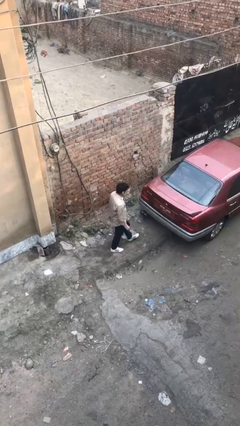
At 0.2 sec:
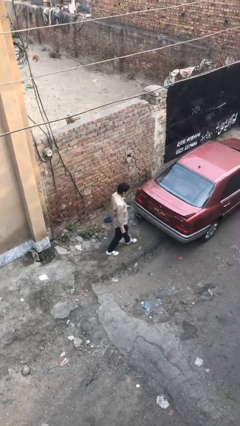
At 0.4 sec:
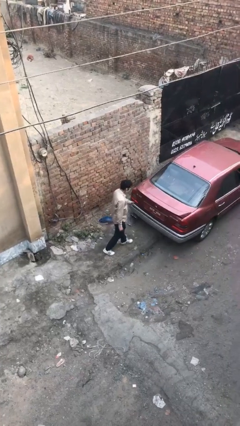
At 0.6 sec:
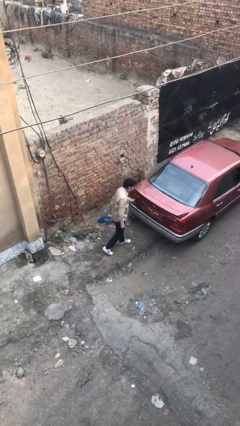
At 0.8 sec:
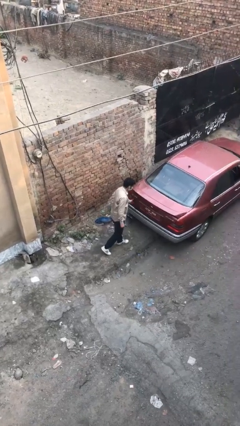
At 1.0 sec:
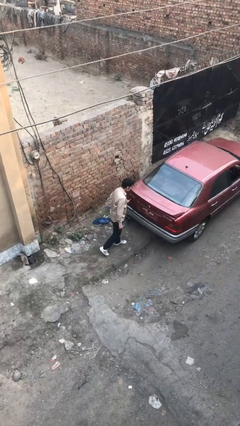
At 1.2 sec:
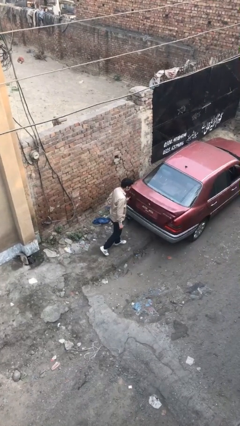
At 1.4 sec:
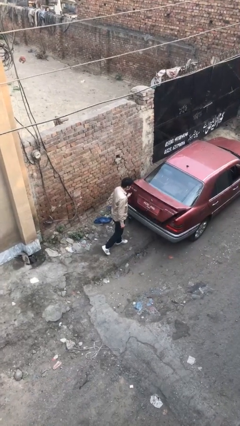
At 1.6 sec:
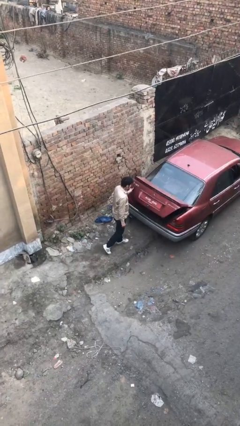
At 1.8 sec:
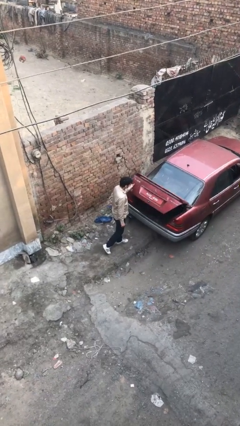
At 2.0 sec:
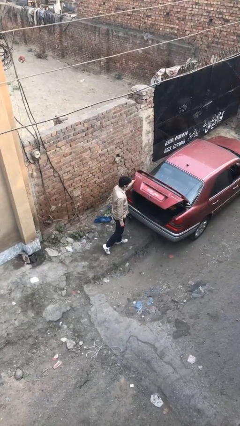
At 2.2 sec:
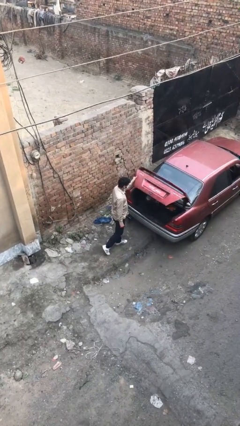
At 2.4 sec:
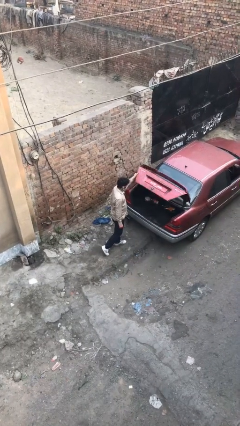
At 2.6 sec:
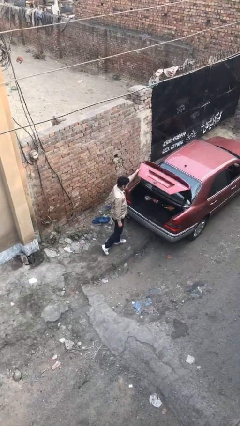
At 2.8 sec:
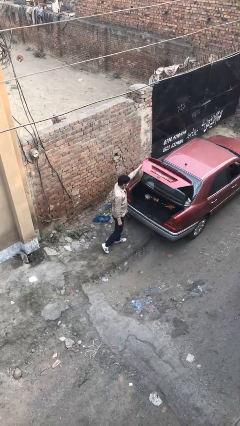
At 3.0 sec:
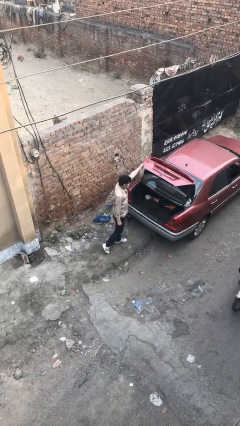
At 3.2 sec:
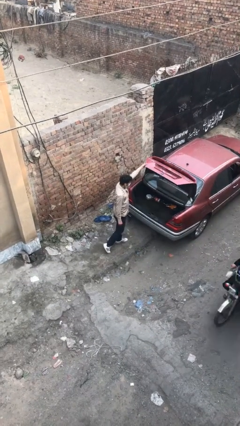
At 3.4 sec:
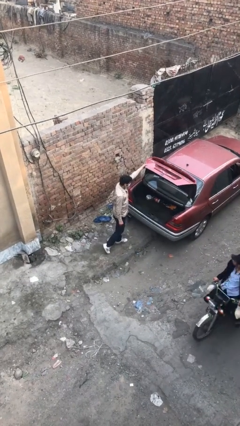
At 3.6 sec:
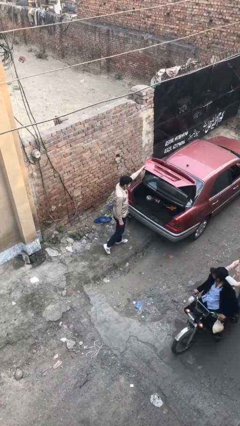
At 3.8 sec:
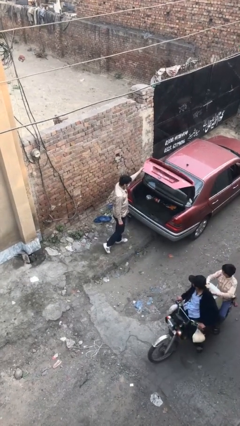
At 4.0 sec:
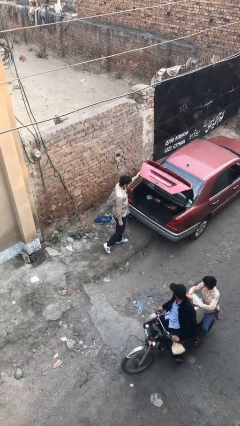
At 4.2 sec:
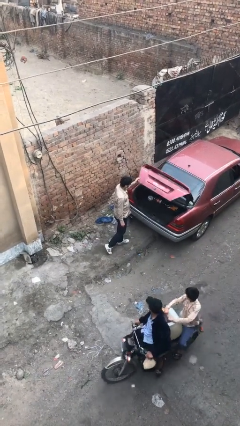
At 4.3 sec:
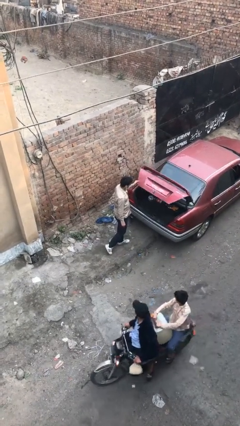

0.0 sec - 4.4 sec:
person opens car trunk

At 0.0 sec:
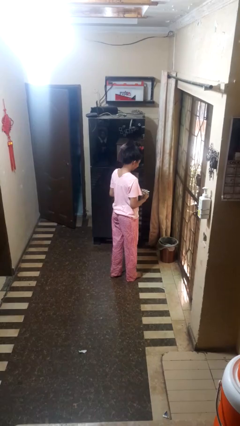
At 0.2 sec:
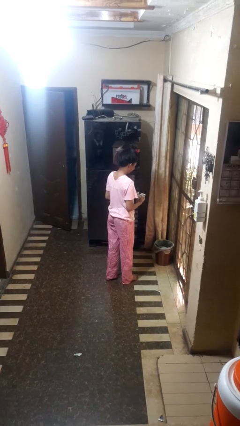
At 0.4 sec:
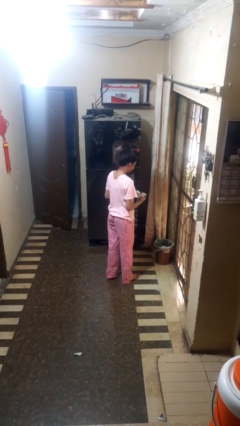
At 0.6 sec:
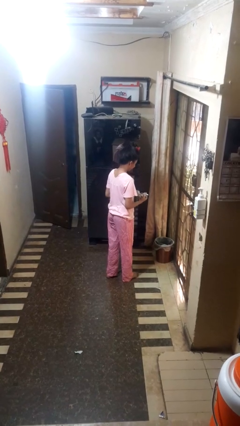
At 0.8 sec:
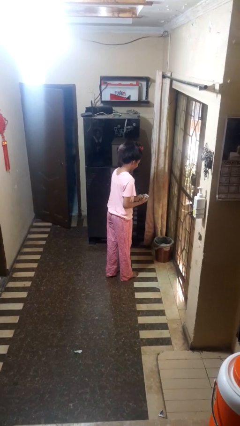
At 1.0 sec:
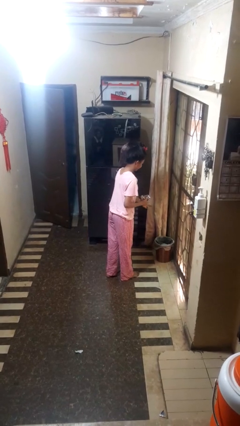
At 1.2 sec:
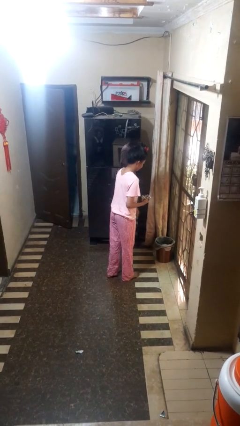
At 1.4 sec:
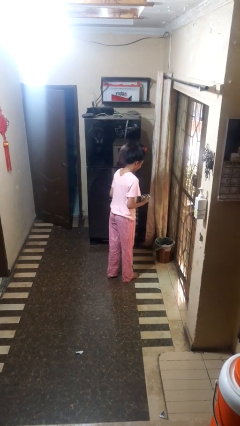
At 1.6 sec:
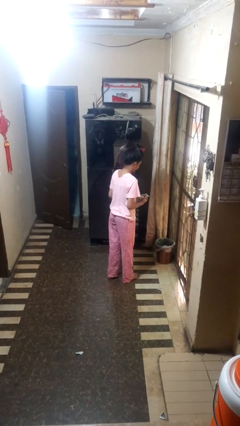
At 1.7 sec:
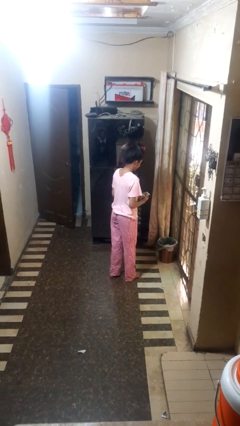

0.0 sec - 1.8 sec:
person discards trash

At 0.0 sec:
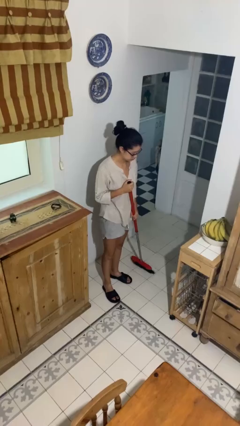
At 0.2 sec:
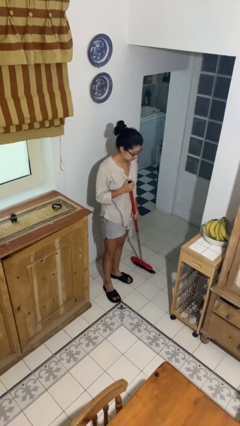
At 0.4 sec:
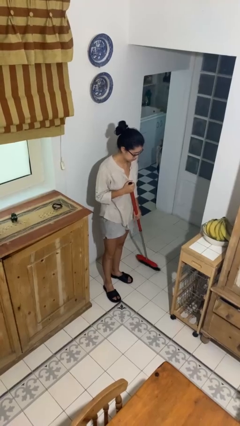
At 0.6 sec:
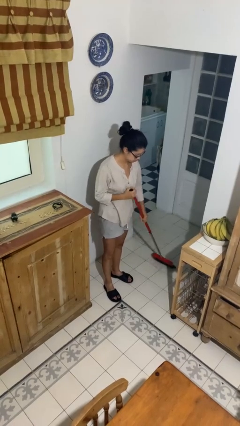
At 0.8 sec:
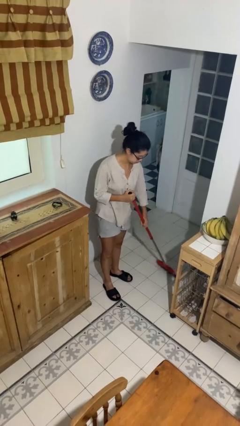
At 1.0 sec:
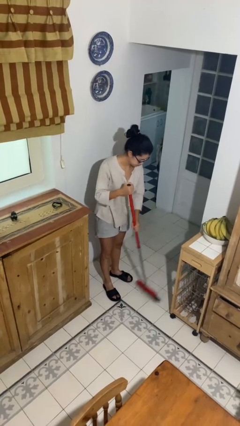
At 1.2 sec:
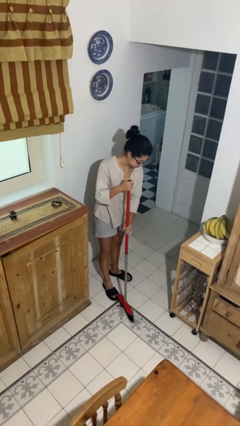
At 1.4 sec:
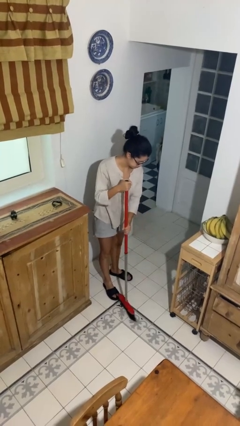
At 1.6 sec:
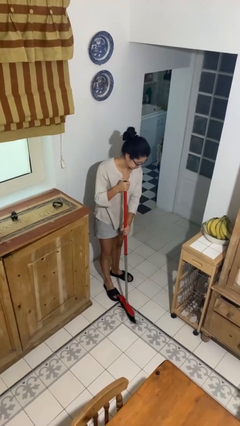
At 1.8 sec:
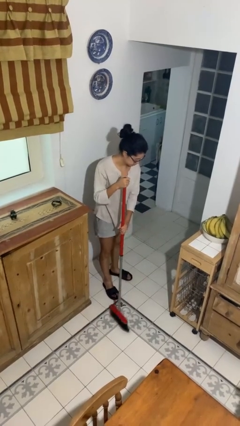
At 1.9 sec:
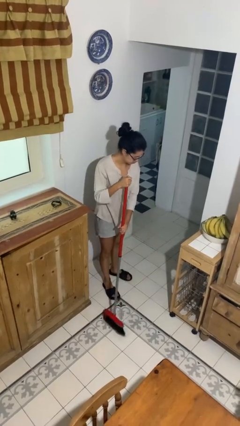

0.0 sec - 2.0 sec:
person sweeps floor

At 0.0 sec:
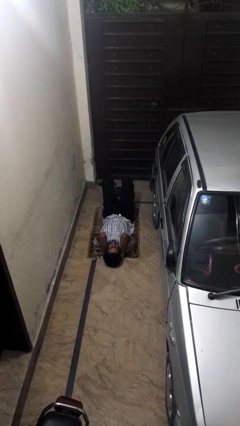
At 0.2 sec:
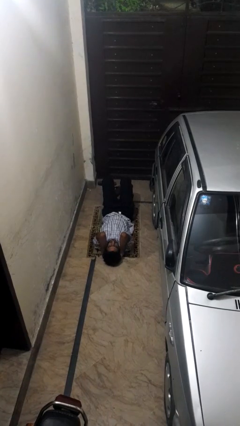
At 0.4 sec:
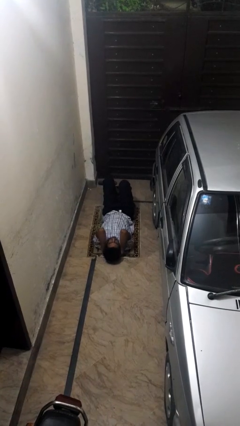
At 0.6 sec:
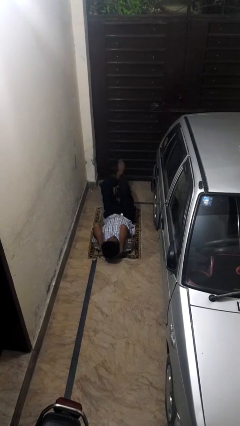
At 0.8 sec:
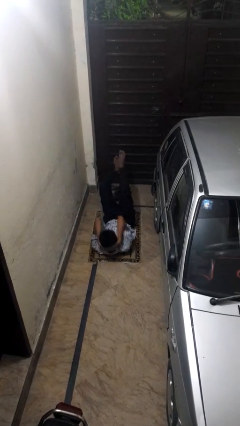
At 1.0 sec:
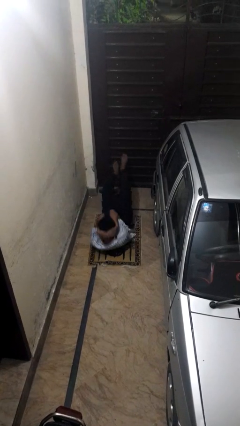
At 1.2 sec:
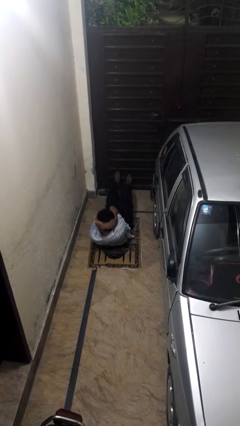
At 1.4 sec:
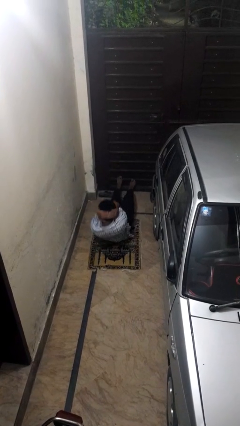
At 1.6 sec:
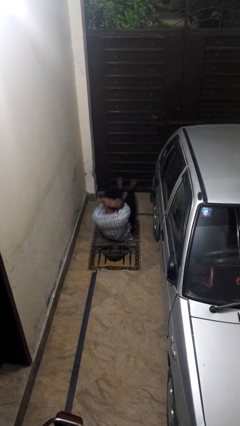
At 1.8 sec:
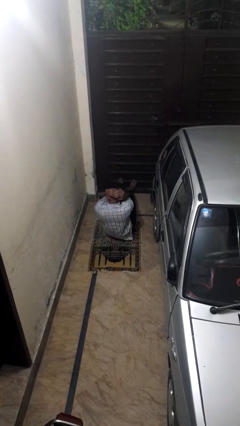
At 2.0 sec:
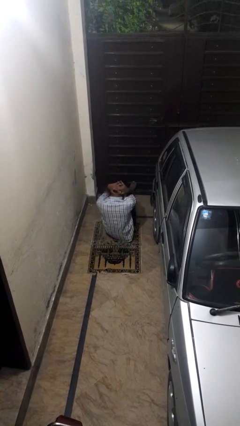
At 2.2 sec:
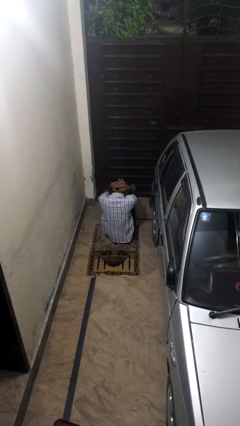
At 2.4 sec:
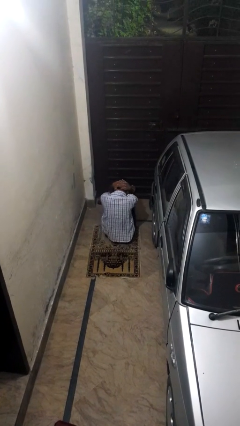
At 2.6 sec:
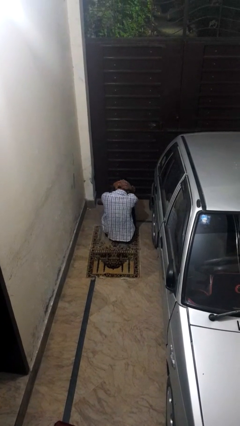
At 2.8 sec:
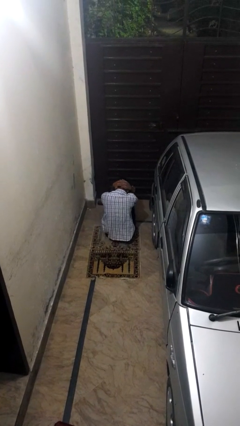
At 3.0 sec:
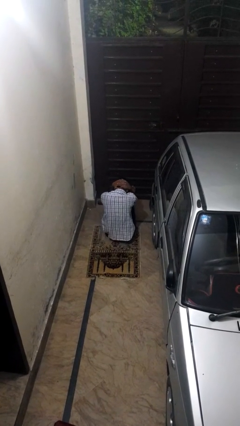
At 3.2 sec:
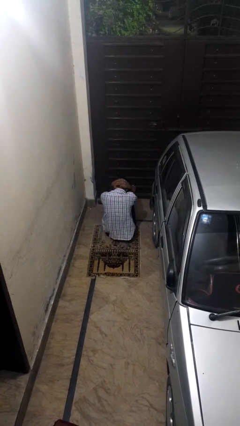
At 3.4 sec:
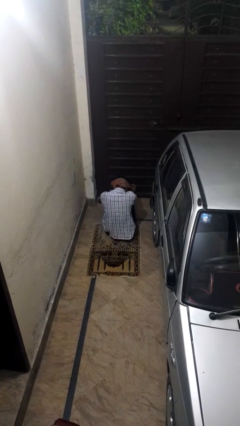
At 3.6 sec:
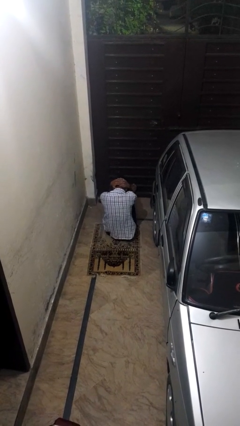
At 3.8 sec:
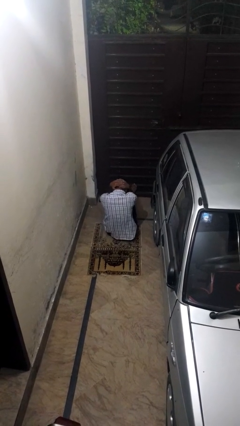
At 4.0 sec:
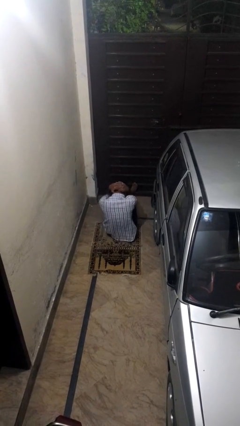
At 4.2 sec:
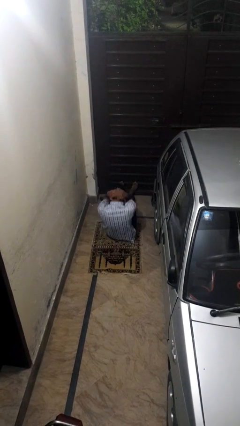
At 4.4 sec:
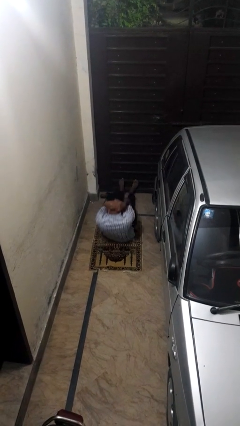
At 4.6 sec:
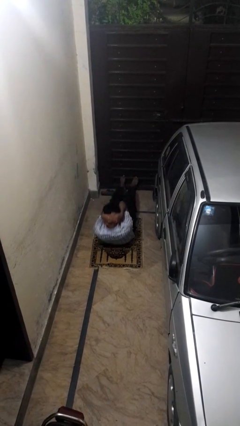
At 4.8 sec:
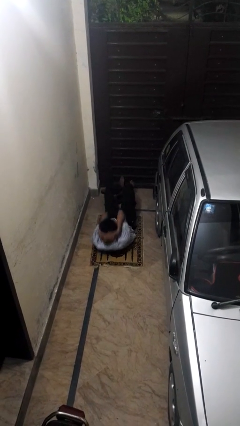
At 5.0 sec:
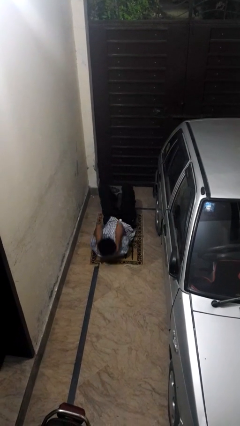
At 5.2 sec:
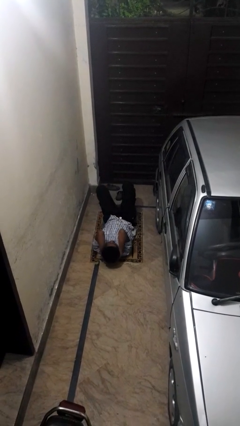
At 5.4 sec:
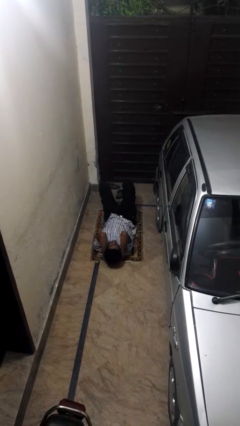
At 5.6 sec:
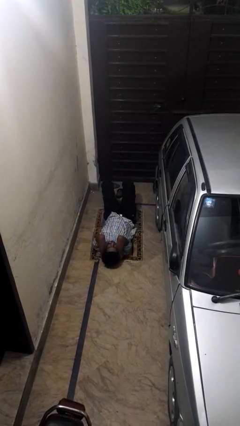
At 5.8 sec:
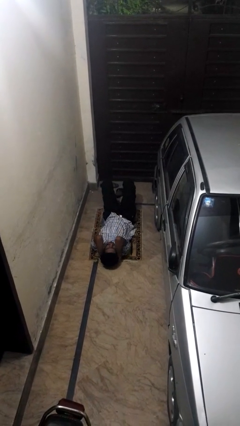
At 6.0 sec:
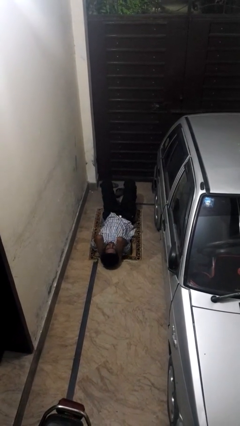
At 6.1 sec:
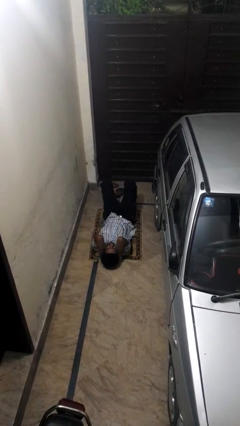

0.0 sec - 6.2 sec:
person exercises with situp

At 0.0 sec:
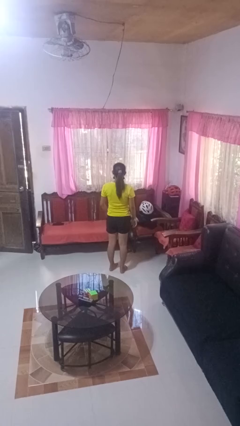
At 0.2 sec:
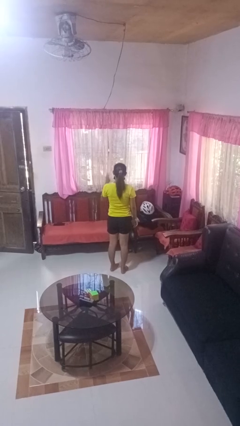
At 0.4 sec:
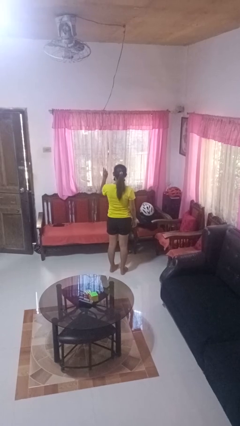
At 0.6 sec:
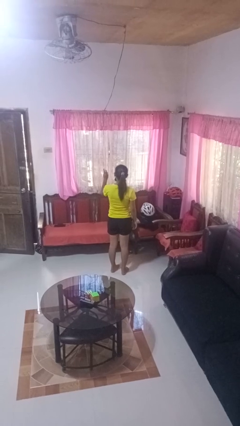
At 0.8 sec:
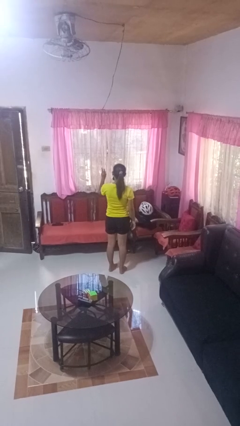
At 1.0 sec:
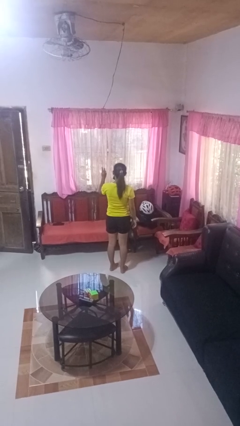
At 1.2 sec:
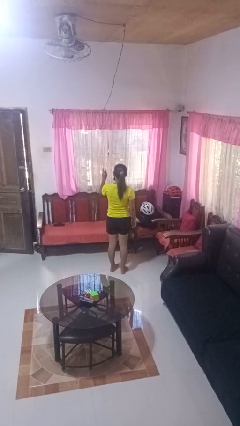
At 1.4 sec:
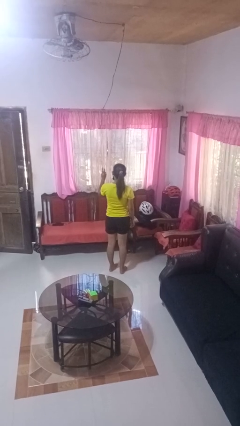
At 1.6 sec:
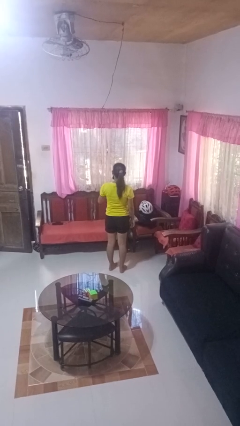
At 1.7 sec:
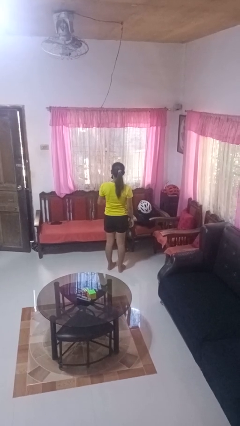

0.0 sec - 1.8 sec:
person gestures number three

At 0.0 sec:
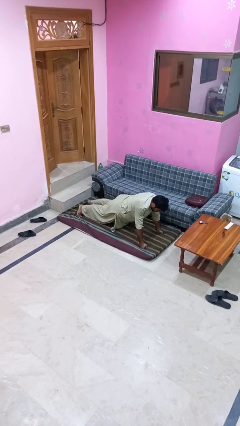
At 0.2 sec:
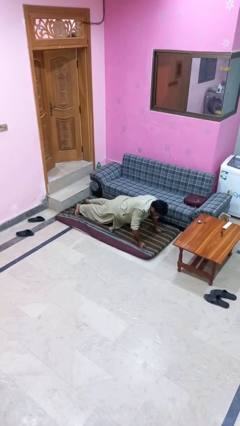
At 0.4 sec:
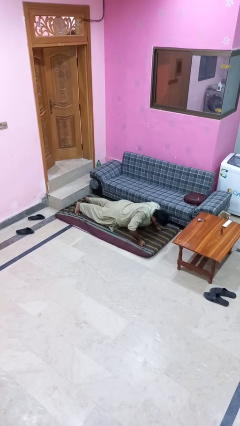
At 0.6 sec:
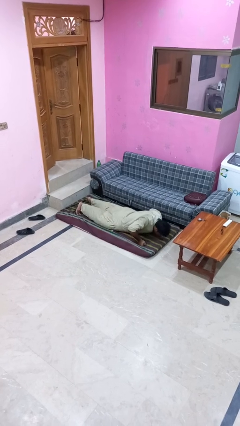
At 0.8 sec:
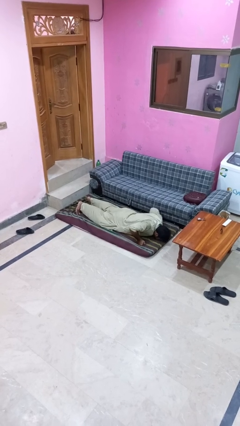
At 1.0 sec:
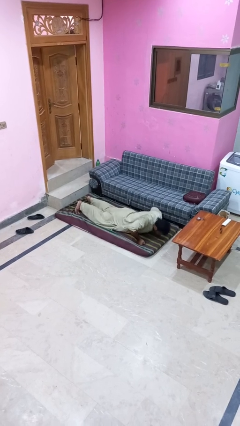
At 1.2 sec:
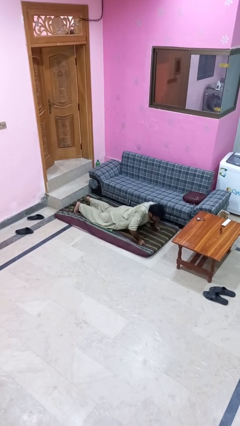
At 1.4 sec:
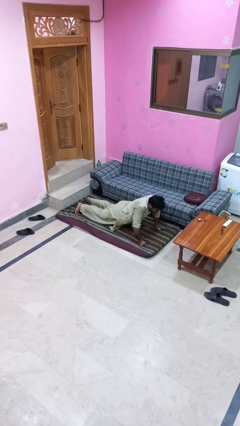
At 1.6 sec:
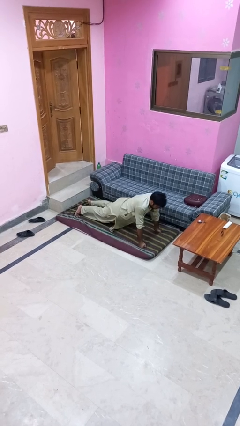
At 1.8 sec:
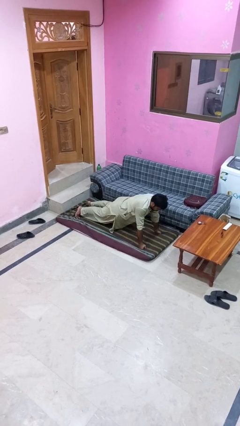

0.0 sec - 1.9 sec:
person exercises with pushup
